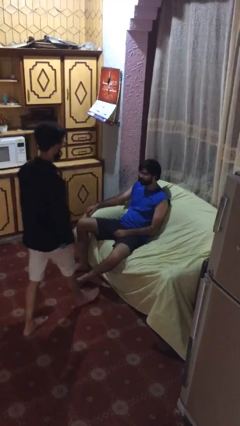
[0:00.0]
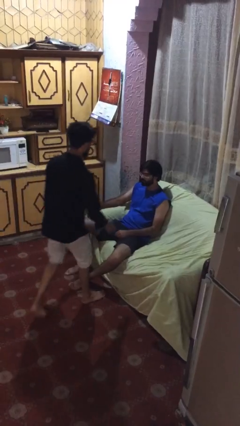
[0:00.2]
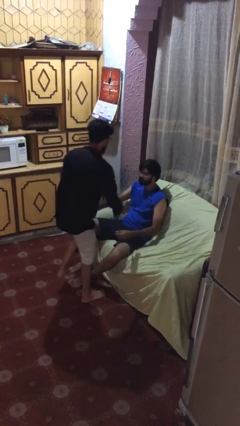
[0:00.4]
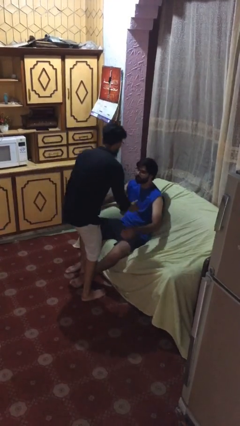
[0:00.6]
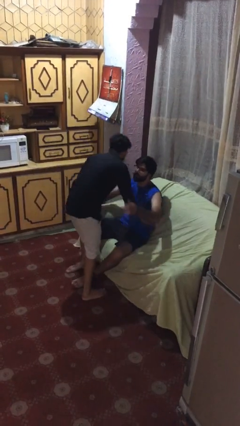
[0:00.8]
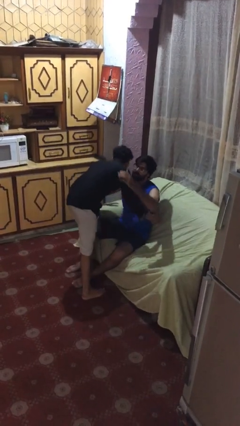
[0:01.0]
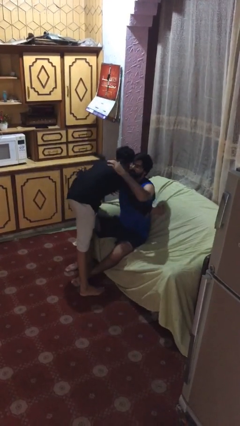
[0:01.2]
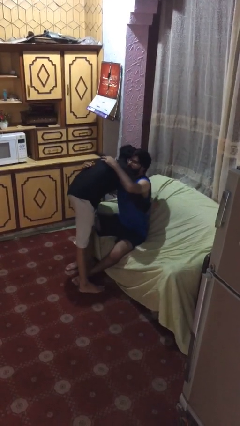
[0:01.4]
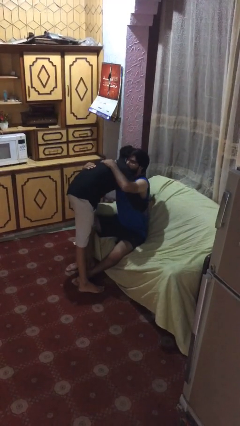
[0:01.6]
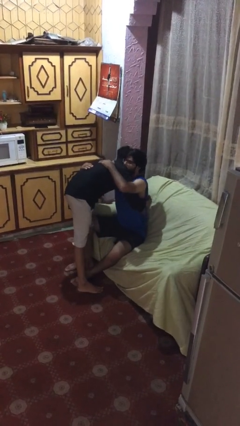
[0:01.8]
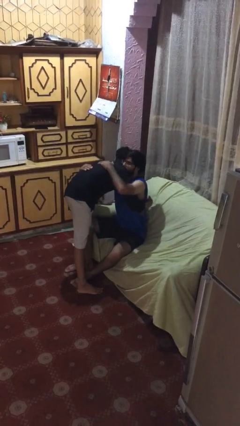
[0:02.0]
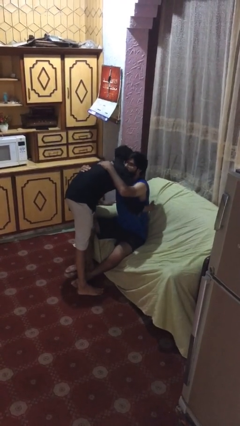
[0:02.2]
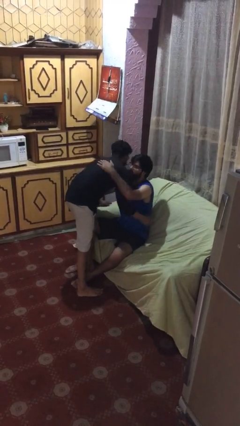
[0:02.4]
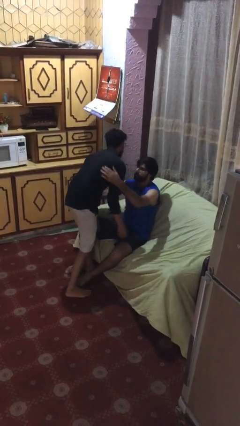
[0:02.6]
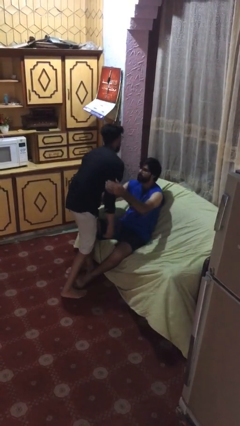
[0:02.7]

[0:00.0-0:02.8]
person embraces person

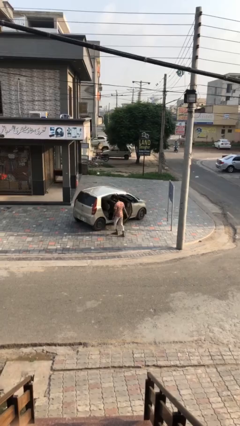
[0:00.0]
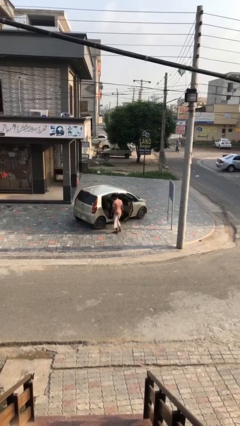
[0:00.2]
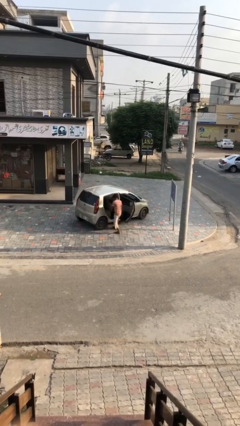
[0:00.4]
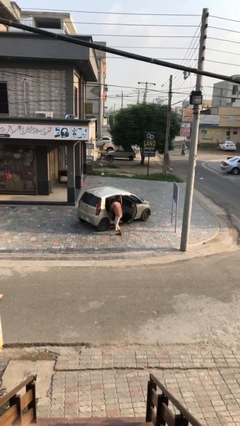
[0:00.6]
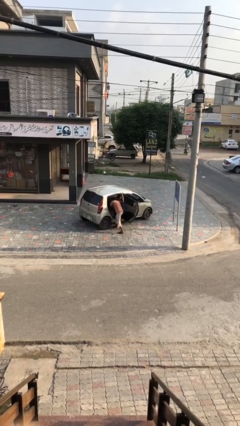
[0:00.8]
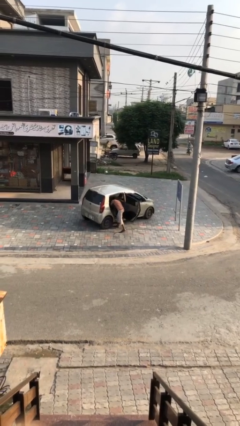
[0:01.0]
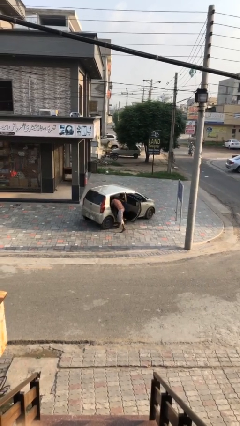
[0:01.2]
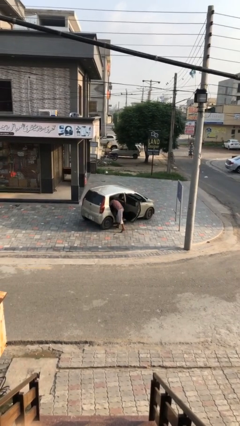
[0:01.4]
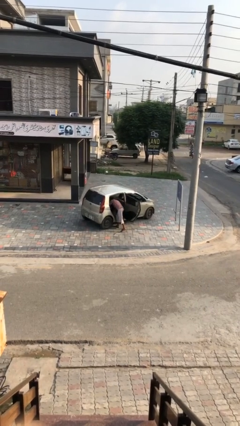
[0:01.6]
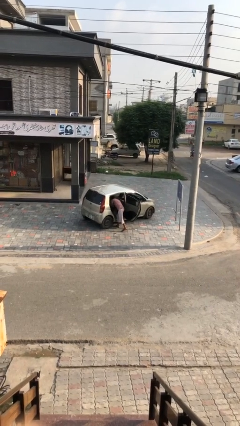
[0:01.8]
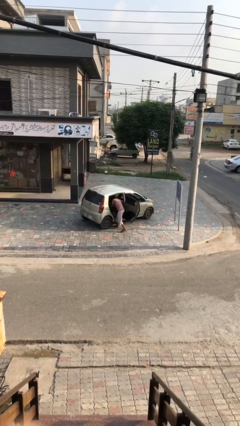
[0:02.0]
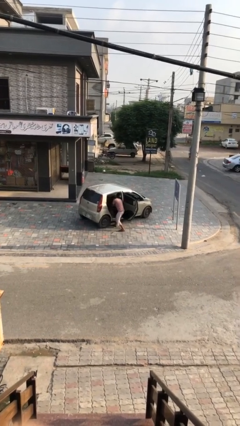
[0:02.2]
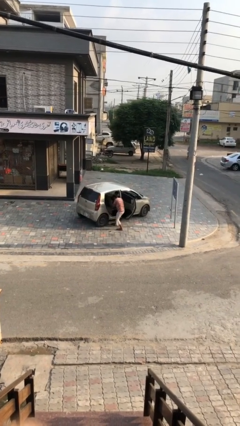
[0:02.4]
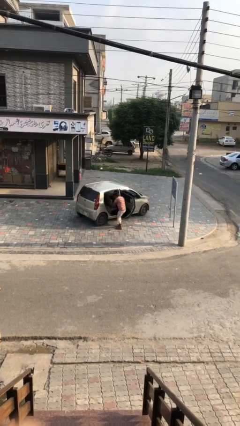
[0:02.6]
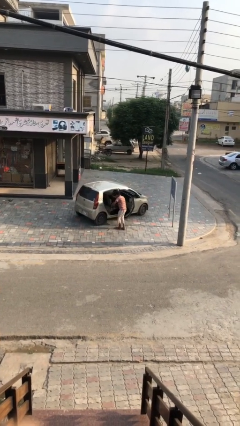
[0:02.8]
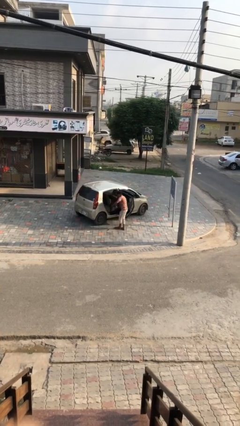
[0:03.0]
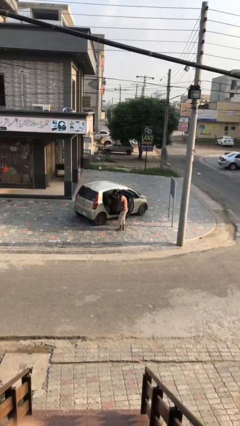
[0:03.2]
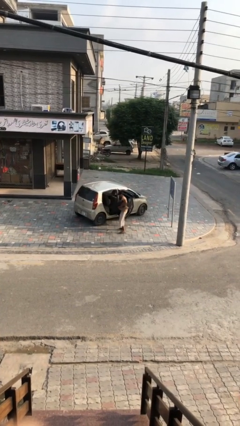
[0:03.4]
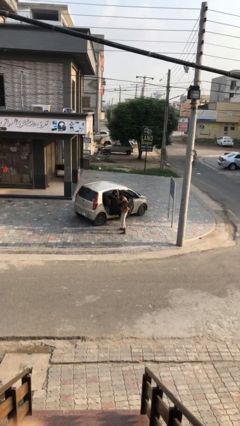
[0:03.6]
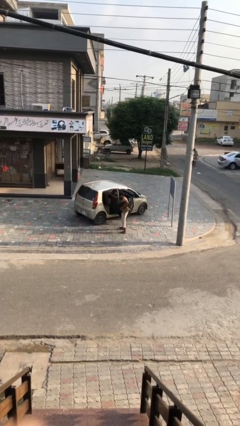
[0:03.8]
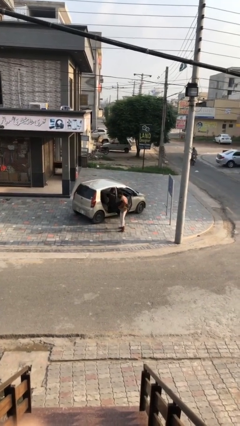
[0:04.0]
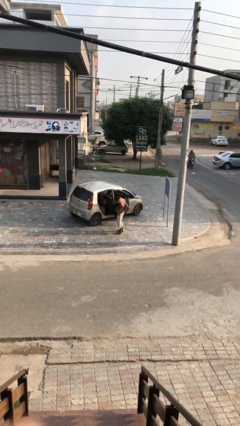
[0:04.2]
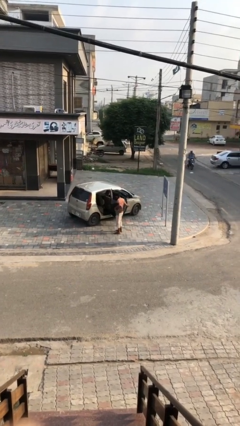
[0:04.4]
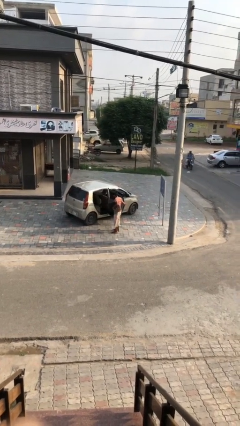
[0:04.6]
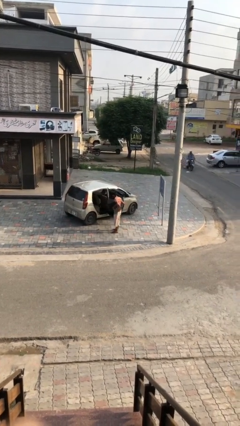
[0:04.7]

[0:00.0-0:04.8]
person unloads car

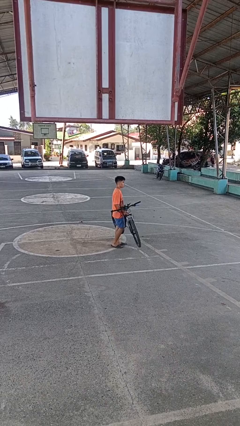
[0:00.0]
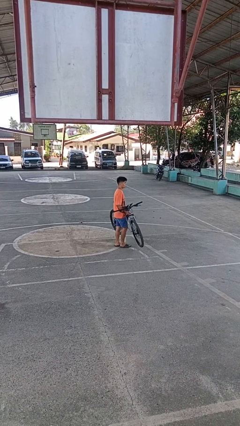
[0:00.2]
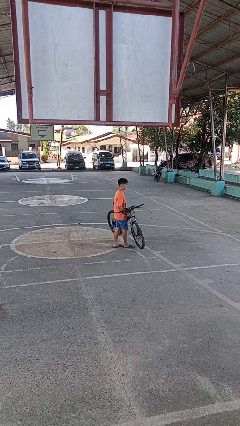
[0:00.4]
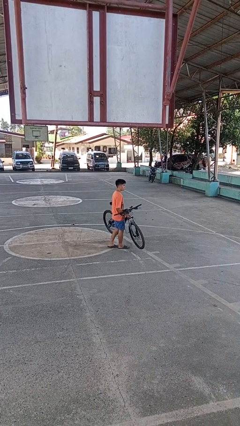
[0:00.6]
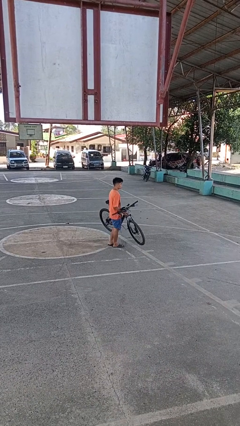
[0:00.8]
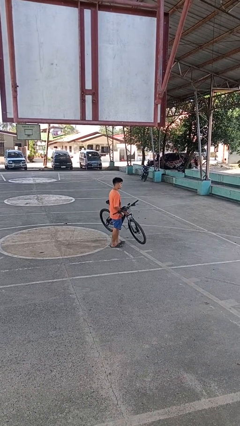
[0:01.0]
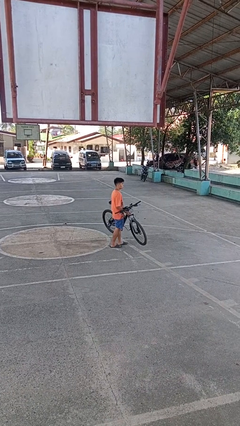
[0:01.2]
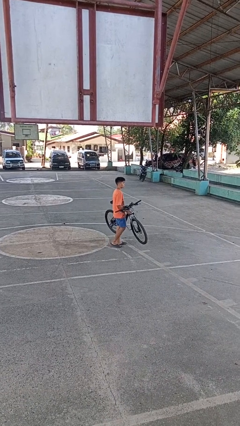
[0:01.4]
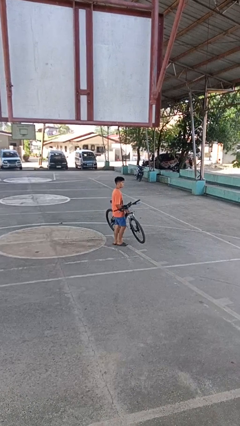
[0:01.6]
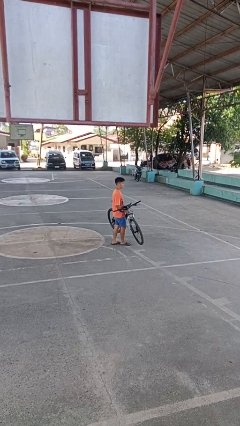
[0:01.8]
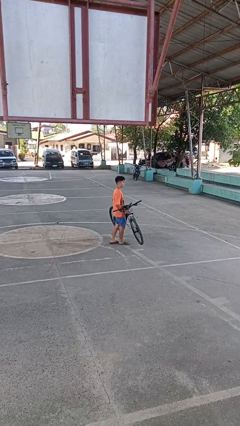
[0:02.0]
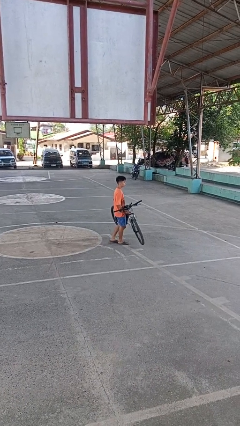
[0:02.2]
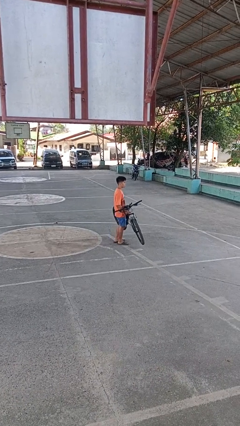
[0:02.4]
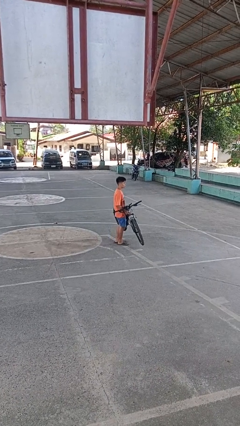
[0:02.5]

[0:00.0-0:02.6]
person carries bicycle

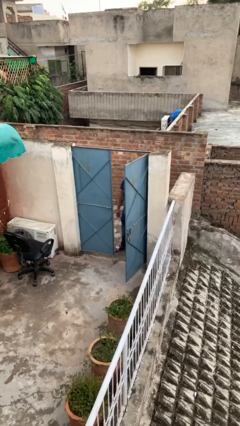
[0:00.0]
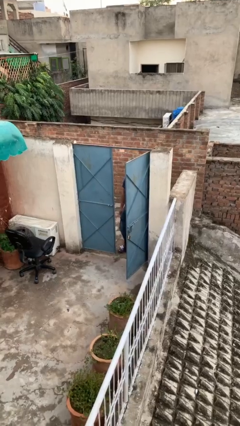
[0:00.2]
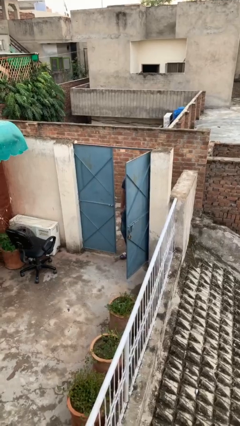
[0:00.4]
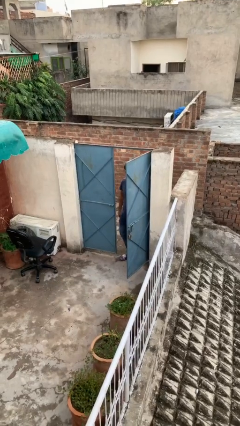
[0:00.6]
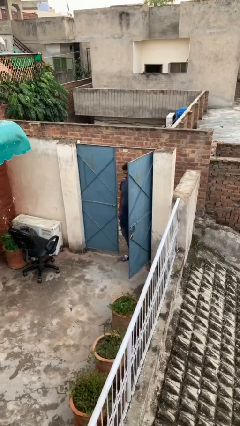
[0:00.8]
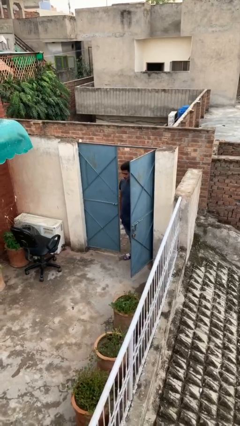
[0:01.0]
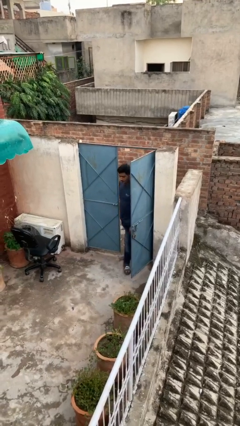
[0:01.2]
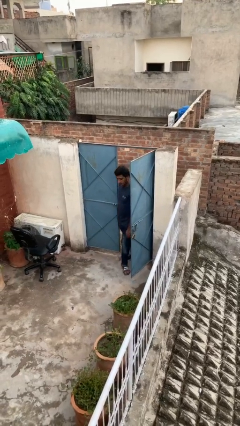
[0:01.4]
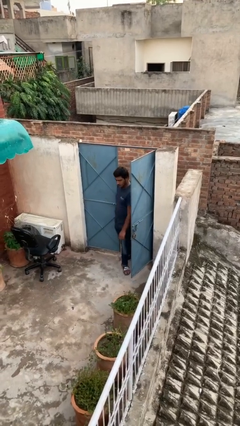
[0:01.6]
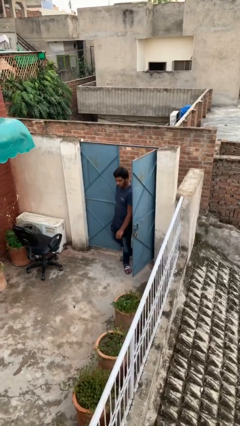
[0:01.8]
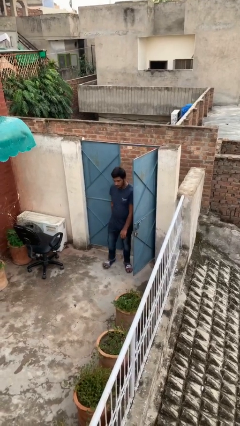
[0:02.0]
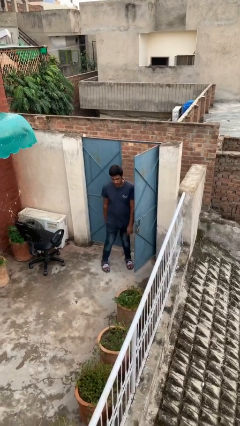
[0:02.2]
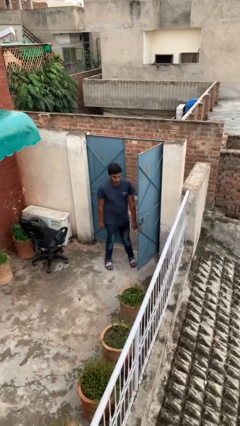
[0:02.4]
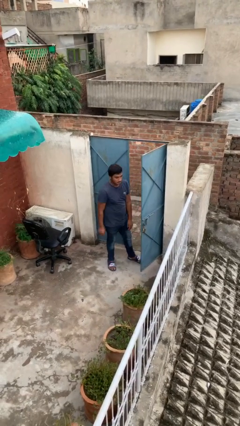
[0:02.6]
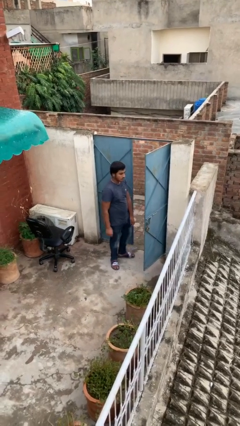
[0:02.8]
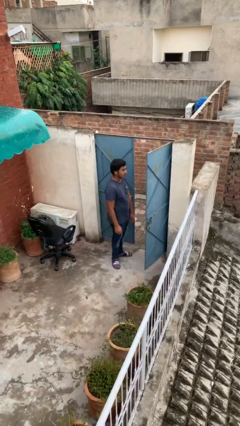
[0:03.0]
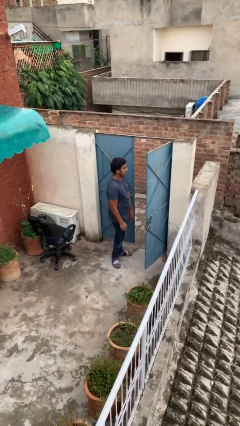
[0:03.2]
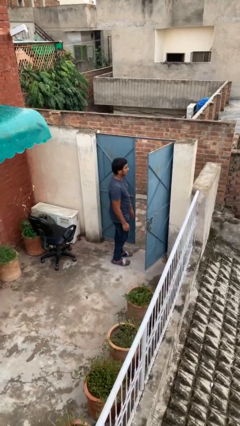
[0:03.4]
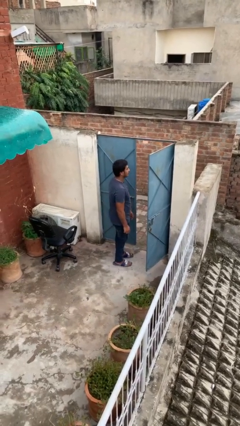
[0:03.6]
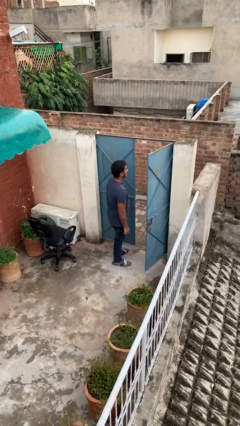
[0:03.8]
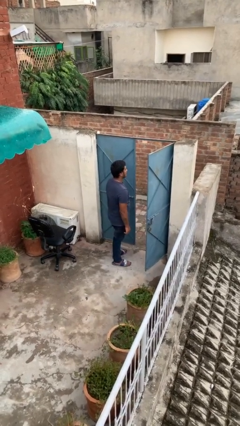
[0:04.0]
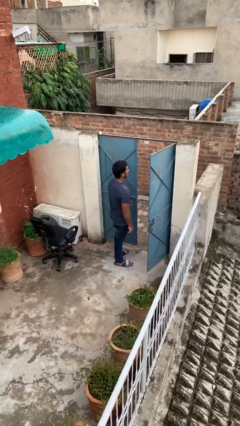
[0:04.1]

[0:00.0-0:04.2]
person enters scene through structure

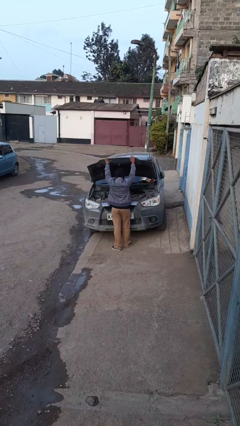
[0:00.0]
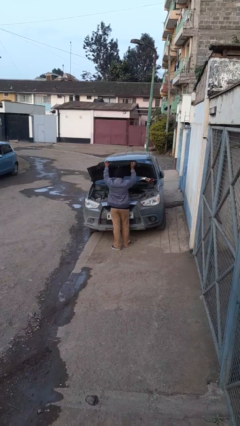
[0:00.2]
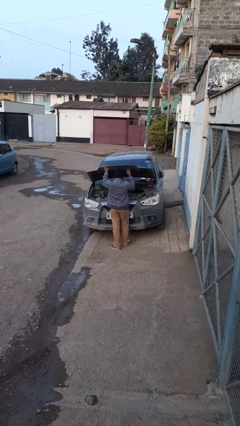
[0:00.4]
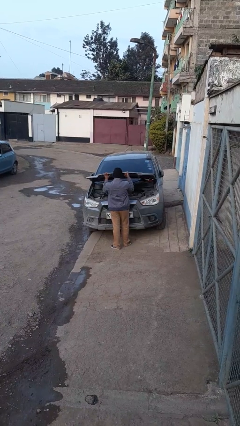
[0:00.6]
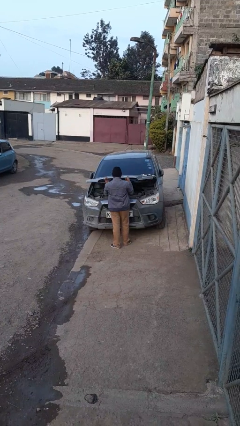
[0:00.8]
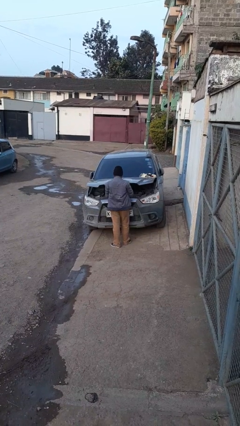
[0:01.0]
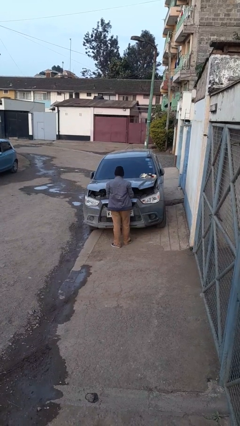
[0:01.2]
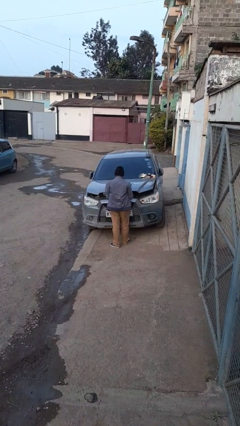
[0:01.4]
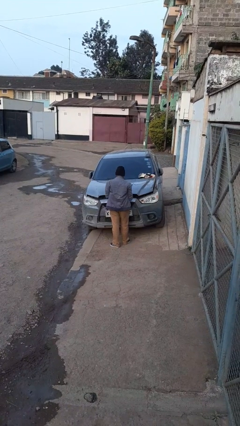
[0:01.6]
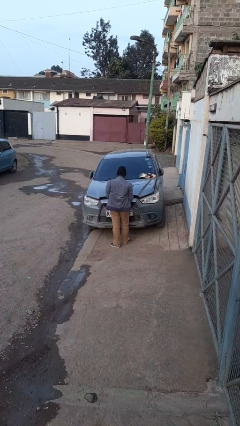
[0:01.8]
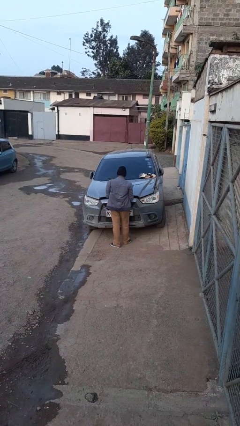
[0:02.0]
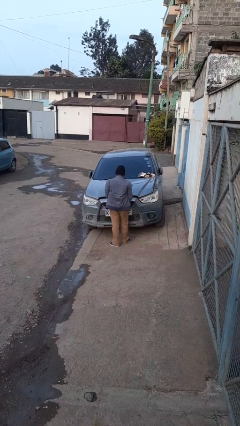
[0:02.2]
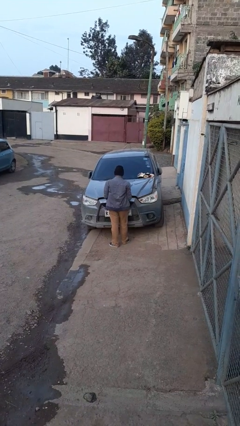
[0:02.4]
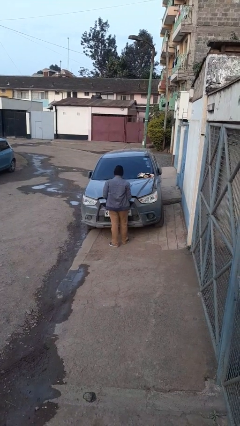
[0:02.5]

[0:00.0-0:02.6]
person closes car hood

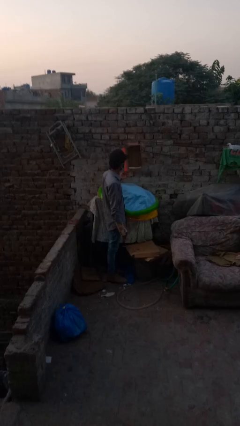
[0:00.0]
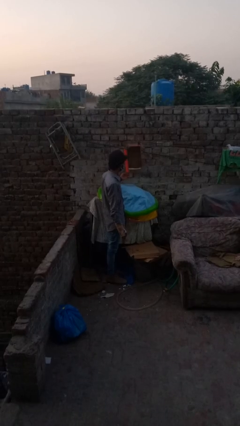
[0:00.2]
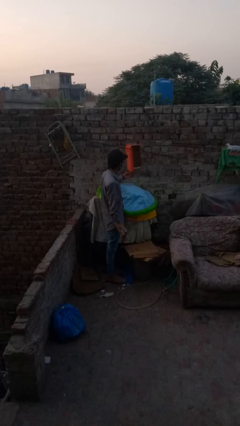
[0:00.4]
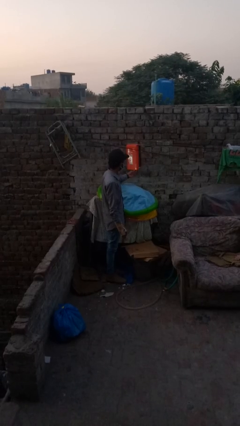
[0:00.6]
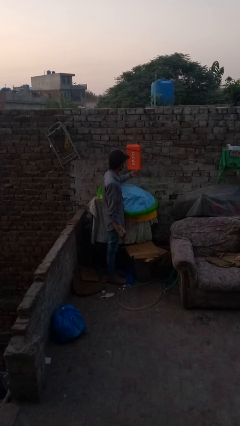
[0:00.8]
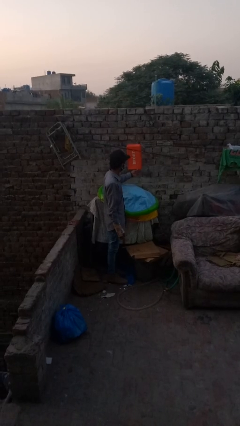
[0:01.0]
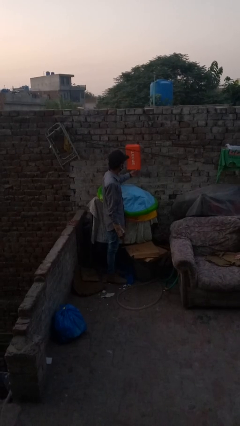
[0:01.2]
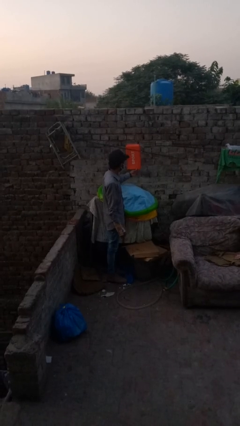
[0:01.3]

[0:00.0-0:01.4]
person closes mailbox
